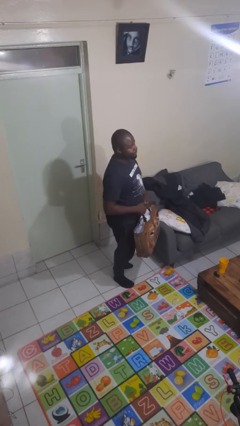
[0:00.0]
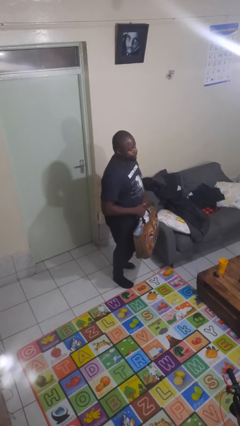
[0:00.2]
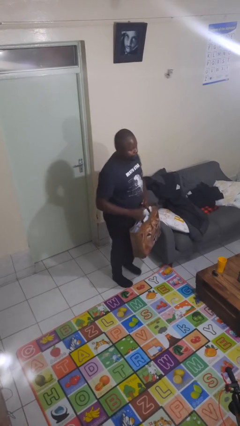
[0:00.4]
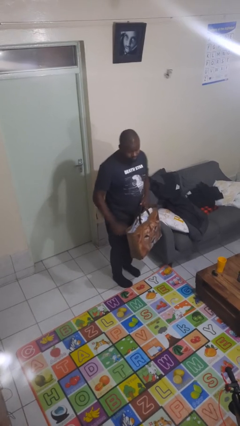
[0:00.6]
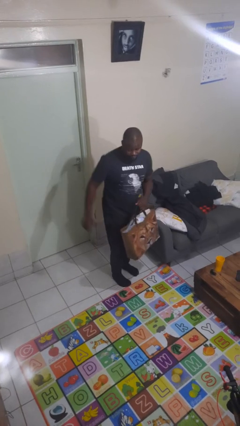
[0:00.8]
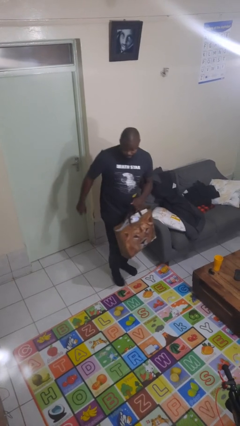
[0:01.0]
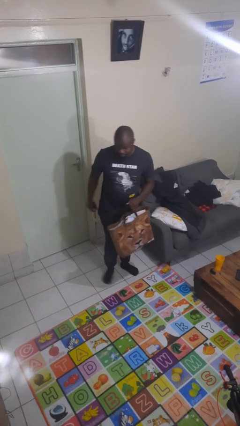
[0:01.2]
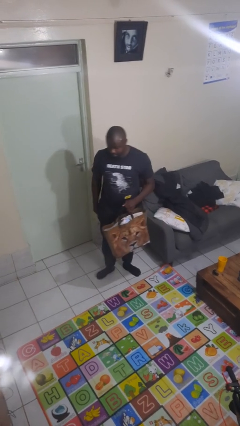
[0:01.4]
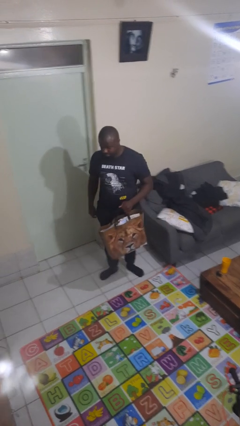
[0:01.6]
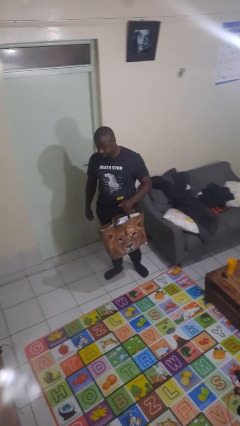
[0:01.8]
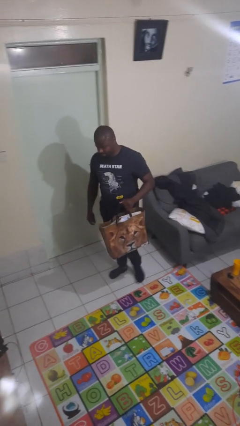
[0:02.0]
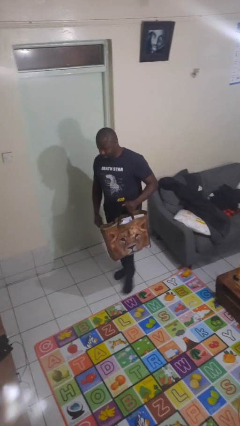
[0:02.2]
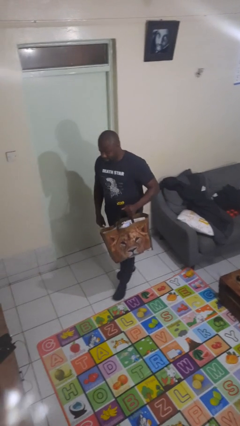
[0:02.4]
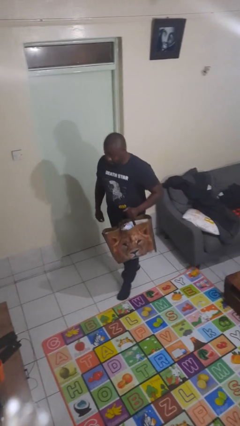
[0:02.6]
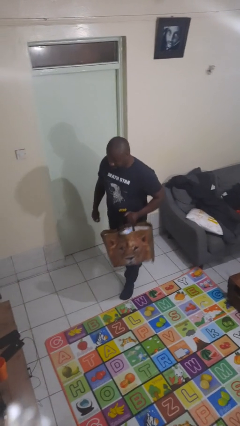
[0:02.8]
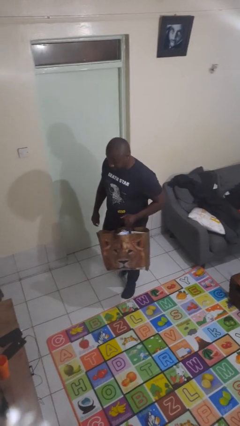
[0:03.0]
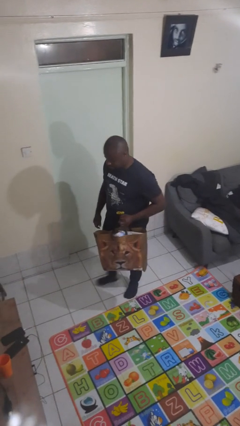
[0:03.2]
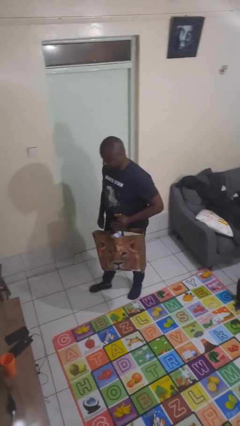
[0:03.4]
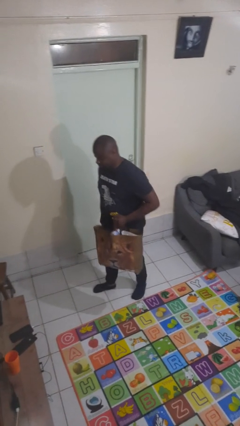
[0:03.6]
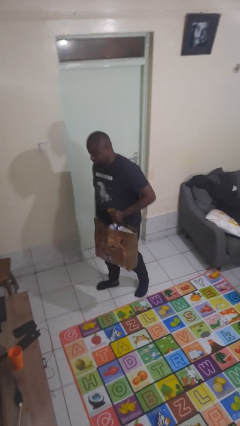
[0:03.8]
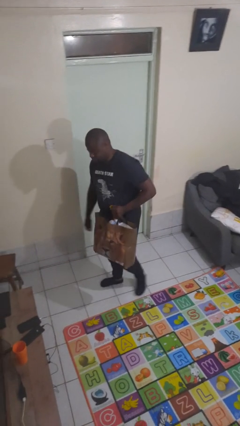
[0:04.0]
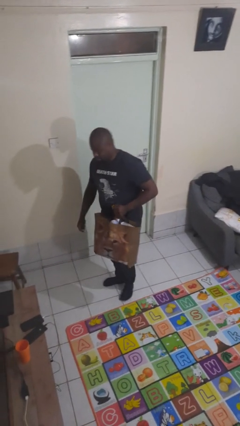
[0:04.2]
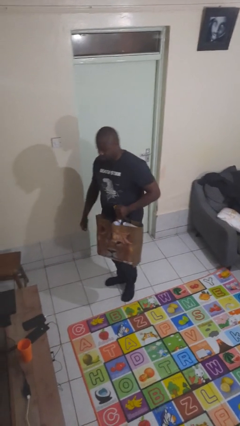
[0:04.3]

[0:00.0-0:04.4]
person carries groceries

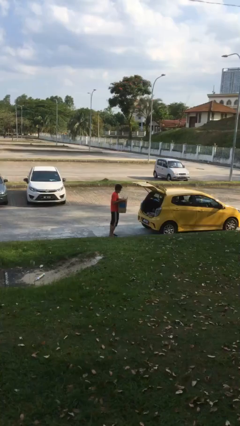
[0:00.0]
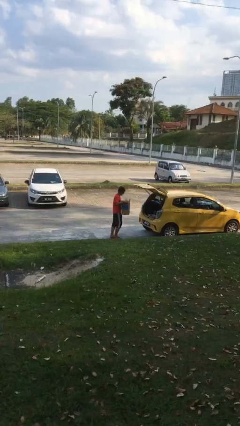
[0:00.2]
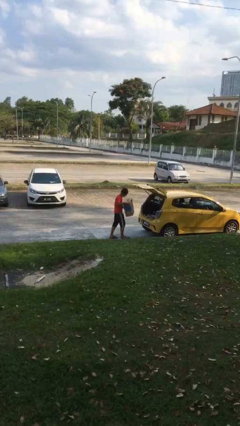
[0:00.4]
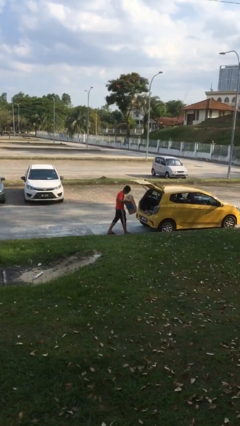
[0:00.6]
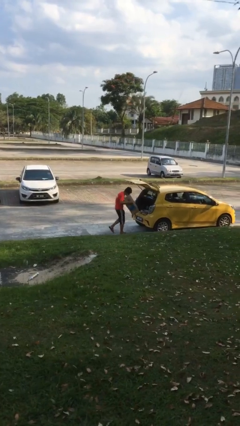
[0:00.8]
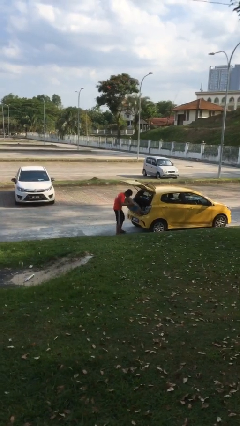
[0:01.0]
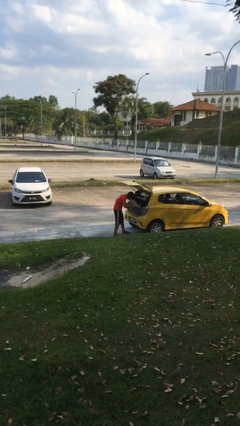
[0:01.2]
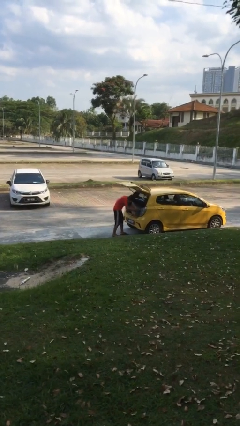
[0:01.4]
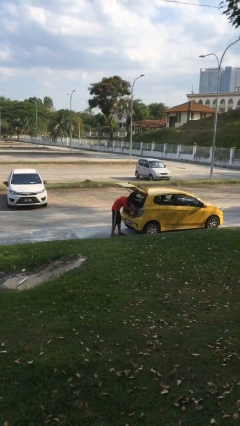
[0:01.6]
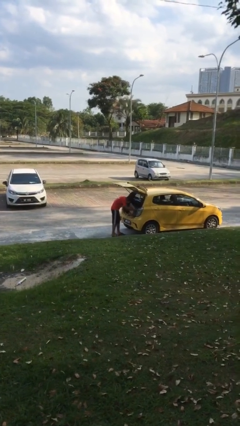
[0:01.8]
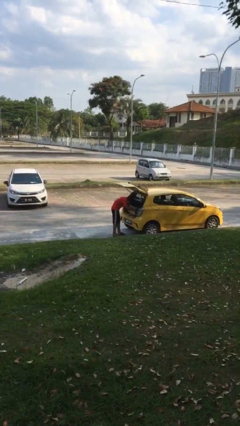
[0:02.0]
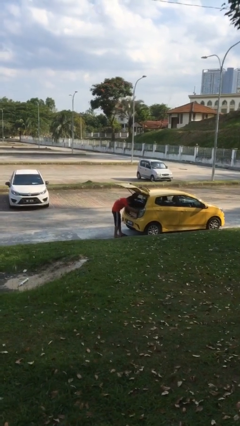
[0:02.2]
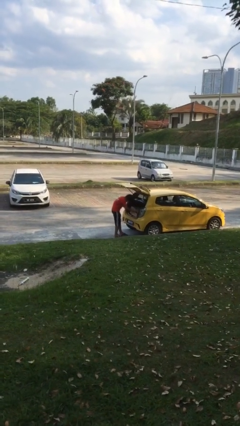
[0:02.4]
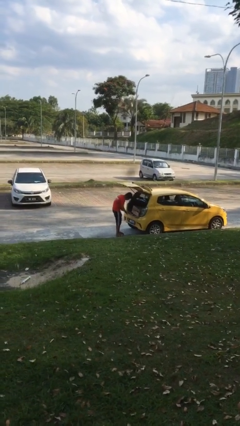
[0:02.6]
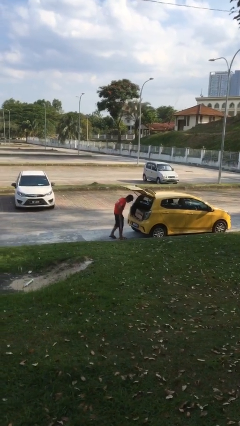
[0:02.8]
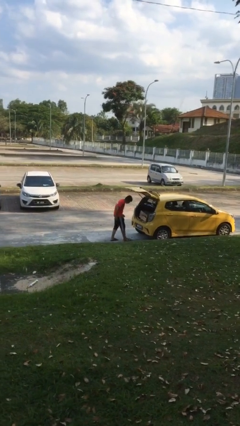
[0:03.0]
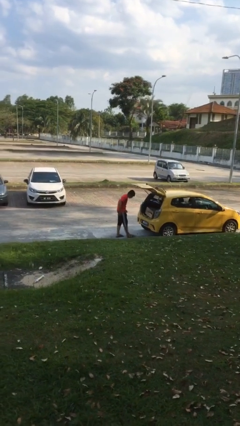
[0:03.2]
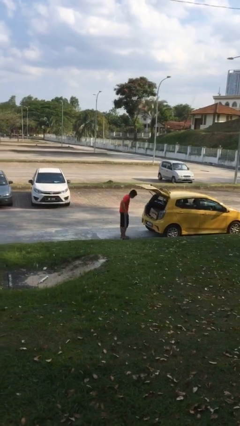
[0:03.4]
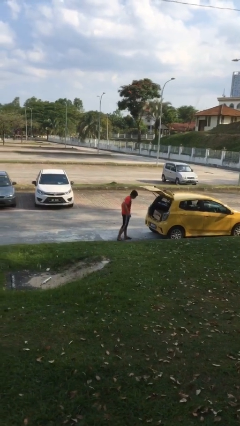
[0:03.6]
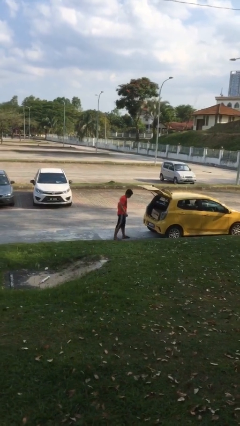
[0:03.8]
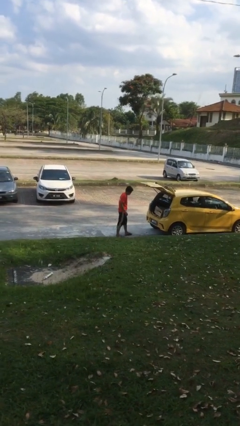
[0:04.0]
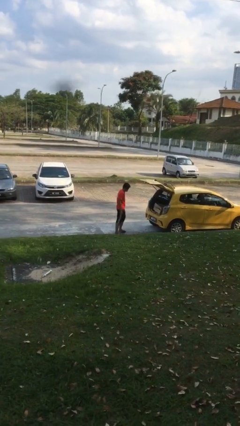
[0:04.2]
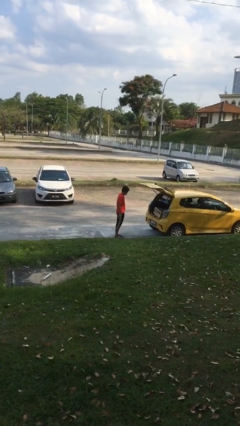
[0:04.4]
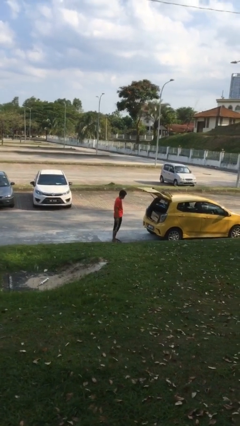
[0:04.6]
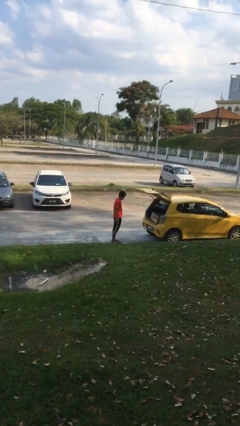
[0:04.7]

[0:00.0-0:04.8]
person loads car

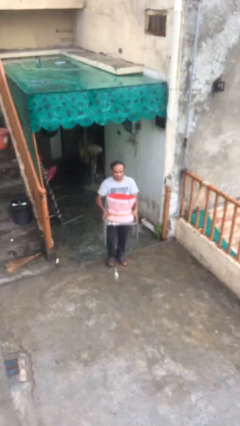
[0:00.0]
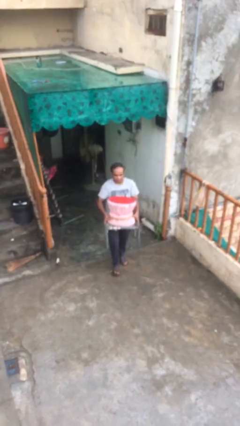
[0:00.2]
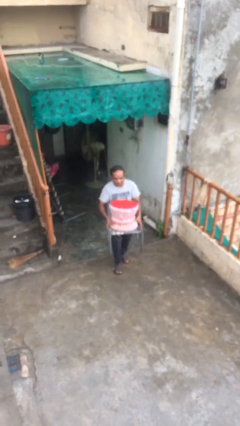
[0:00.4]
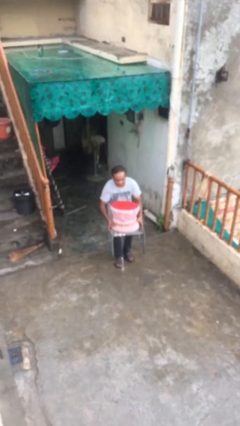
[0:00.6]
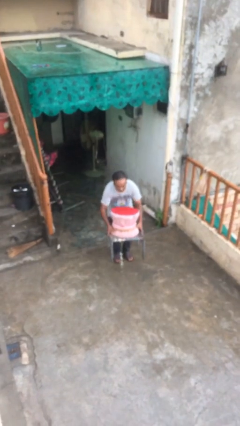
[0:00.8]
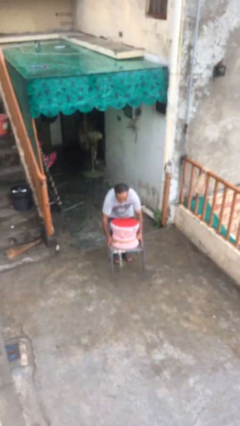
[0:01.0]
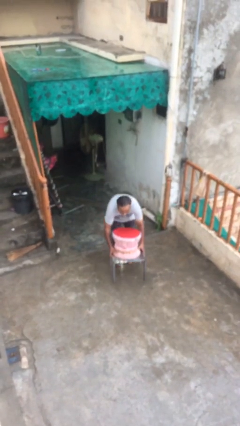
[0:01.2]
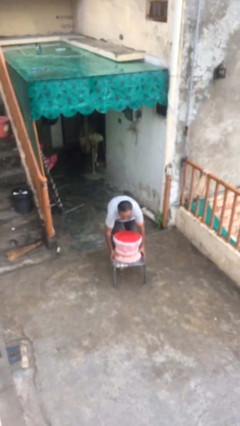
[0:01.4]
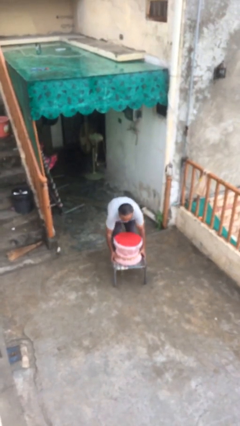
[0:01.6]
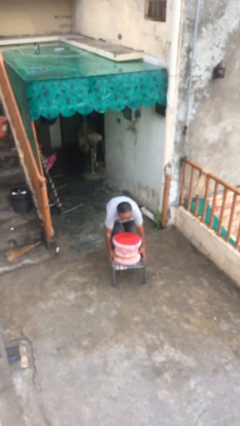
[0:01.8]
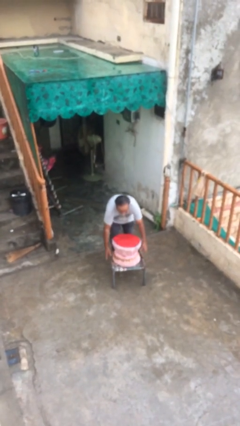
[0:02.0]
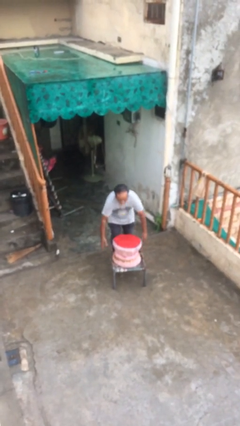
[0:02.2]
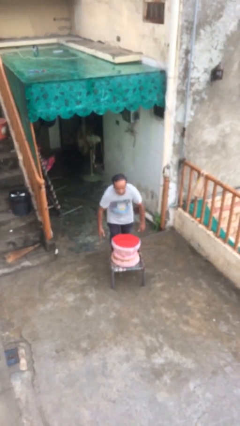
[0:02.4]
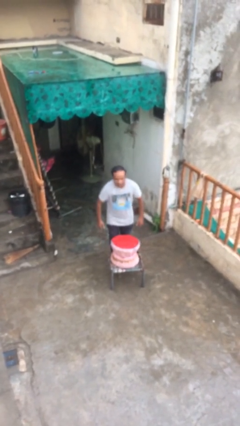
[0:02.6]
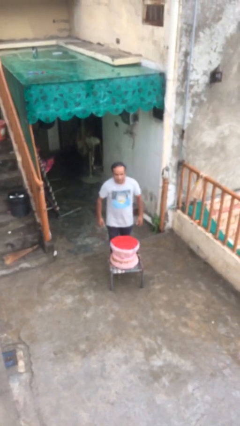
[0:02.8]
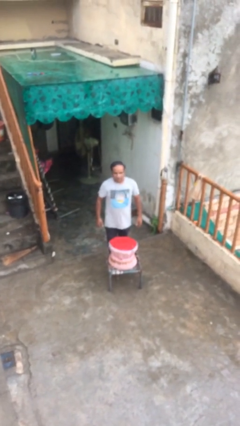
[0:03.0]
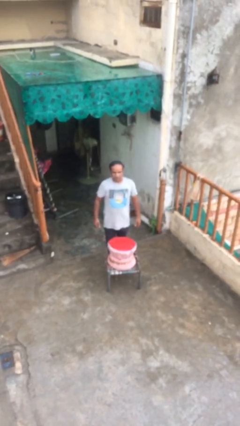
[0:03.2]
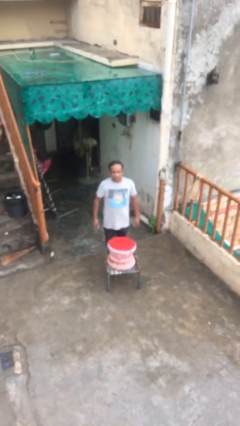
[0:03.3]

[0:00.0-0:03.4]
person puts down object on floor

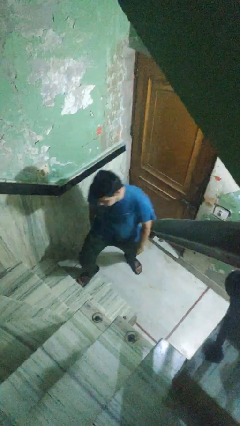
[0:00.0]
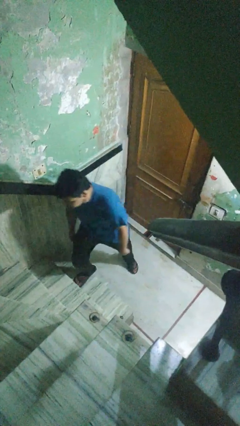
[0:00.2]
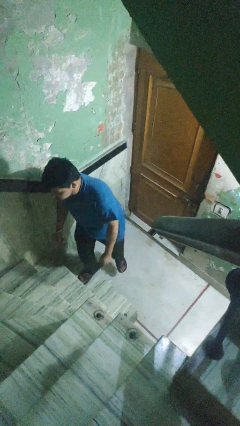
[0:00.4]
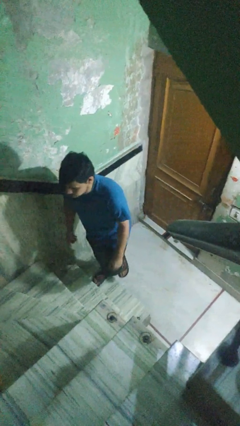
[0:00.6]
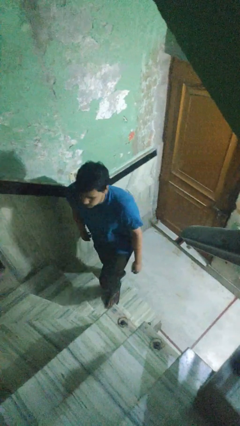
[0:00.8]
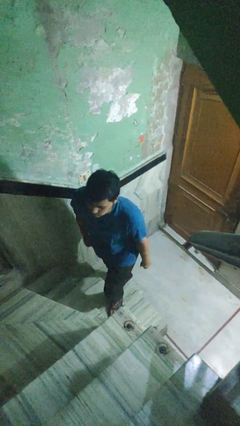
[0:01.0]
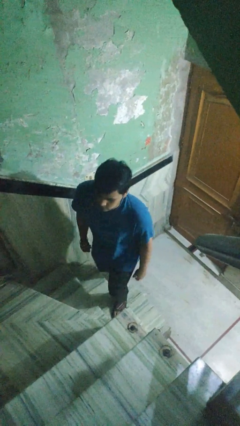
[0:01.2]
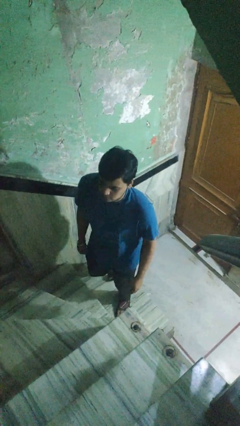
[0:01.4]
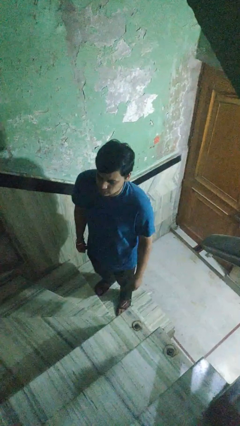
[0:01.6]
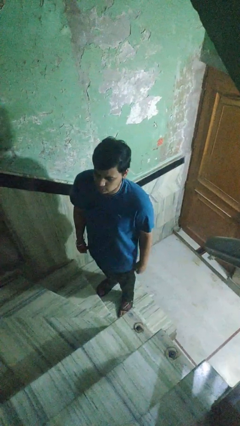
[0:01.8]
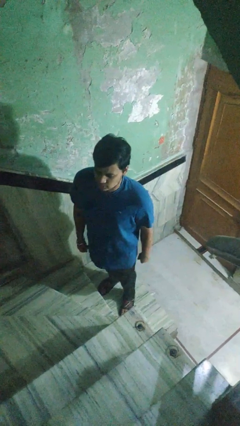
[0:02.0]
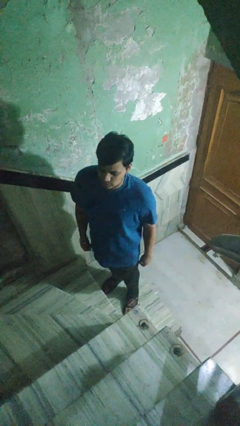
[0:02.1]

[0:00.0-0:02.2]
person climbs up stairs

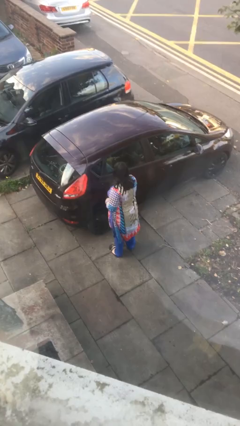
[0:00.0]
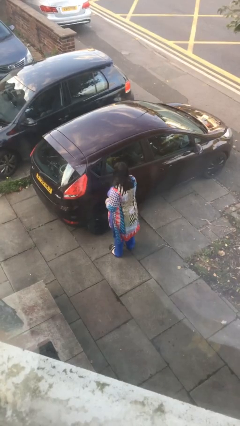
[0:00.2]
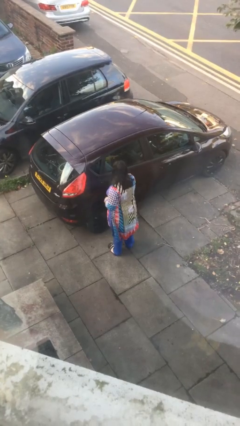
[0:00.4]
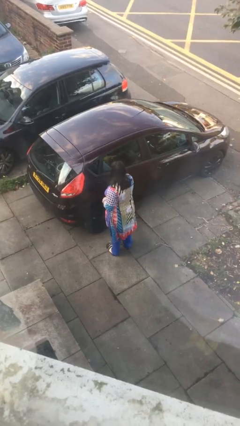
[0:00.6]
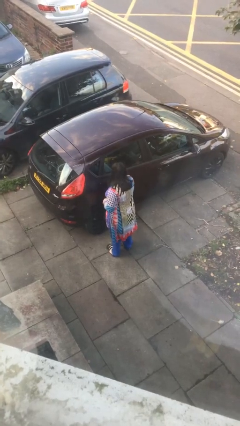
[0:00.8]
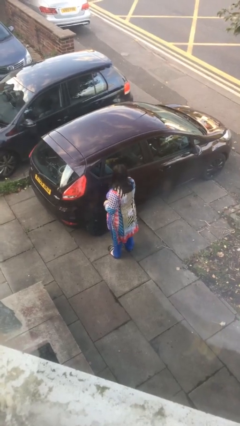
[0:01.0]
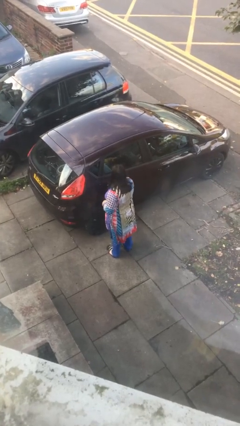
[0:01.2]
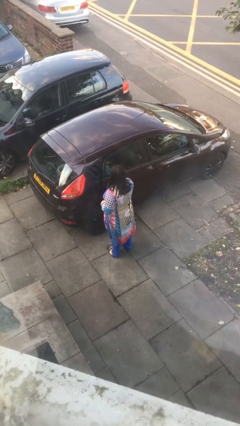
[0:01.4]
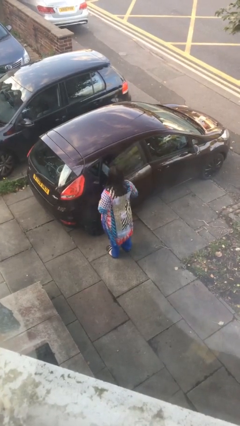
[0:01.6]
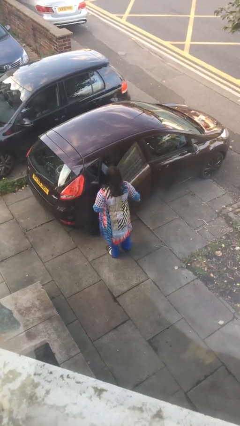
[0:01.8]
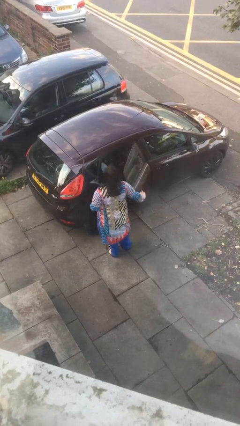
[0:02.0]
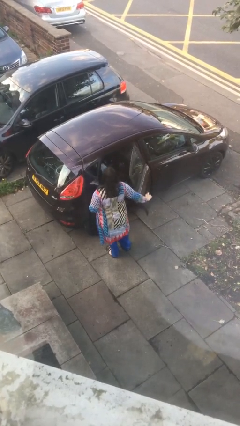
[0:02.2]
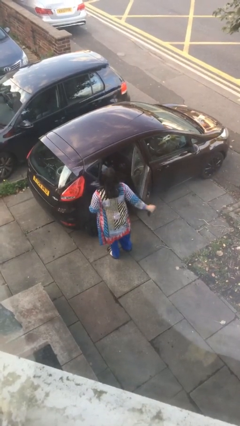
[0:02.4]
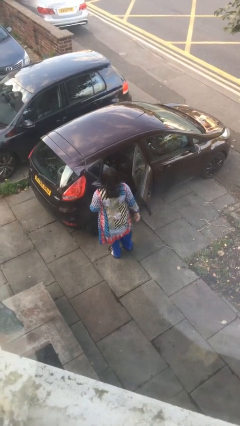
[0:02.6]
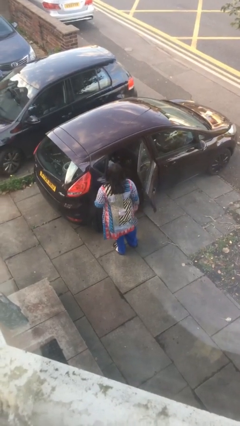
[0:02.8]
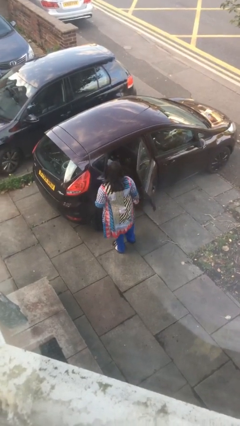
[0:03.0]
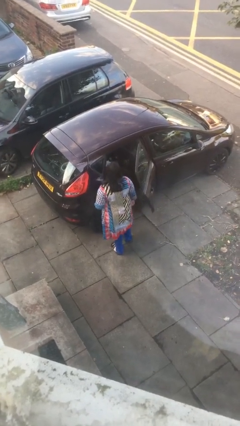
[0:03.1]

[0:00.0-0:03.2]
person opens car door
